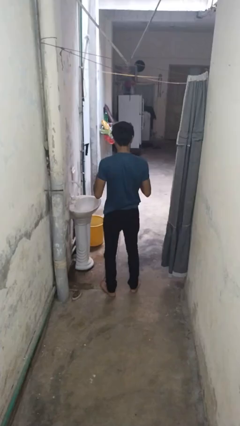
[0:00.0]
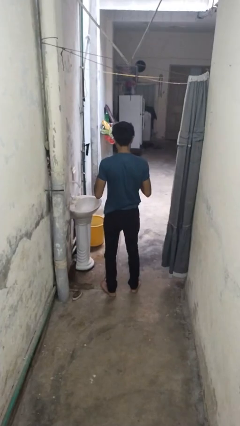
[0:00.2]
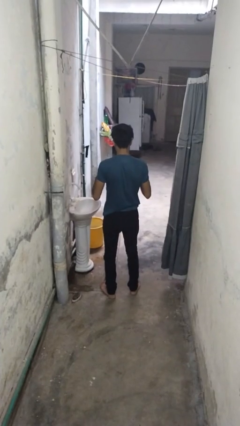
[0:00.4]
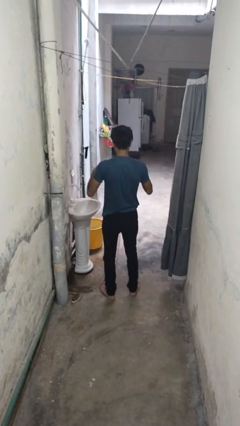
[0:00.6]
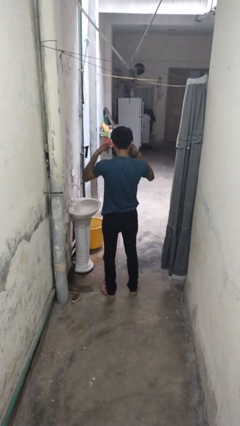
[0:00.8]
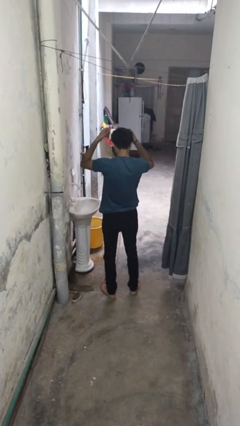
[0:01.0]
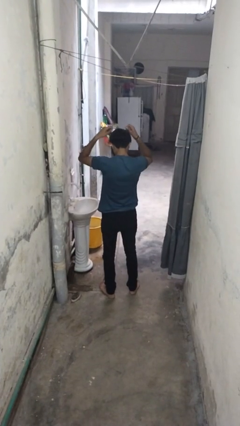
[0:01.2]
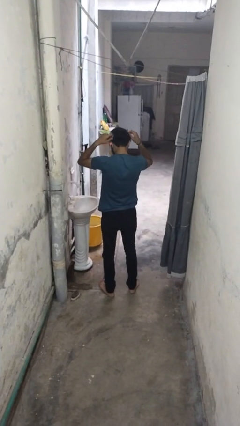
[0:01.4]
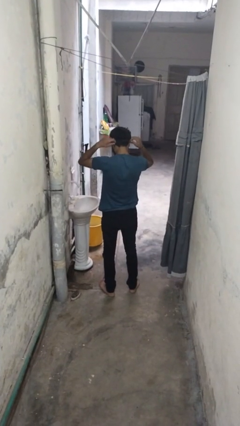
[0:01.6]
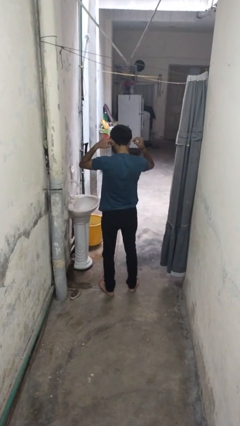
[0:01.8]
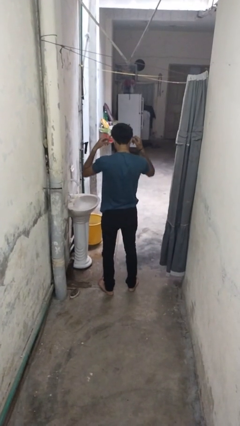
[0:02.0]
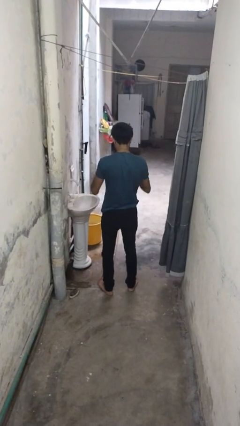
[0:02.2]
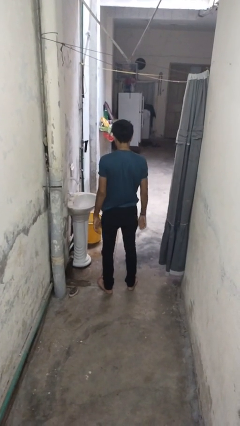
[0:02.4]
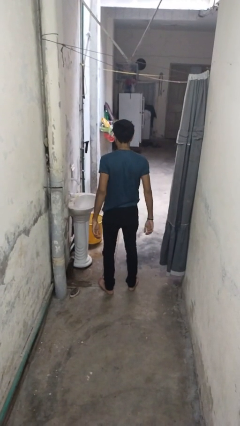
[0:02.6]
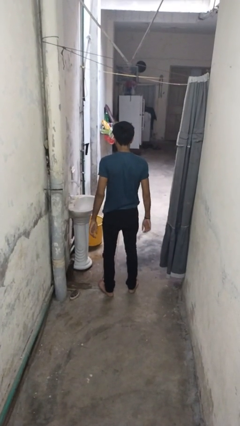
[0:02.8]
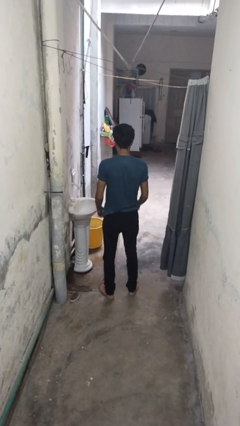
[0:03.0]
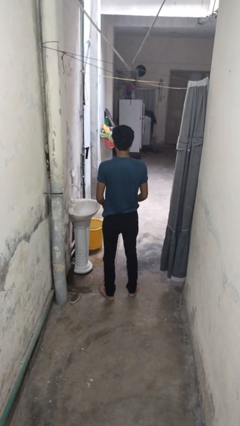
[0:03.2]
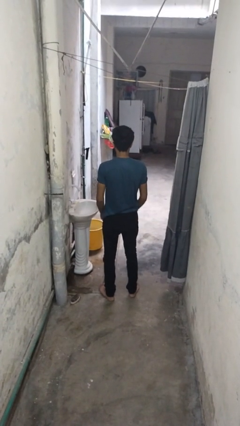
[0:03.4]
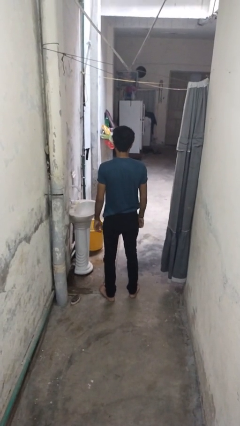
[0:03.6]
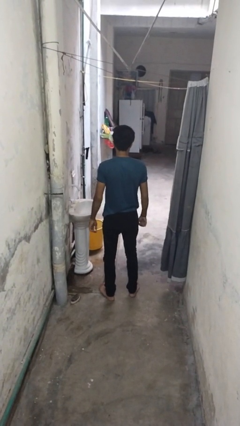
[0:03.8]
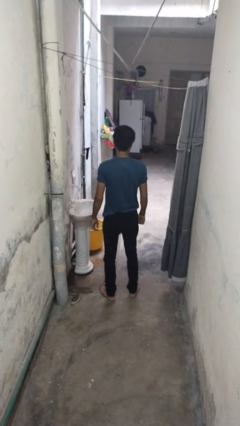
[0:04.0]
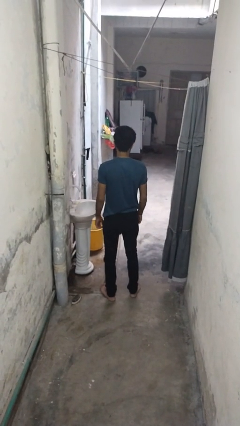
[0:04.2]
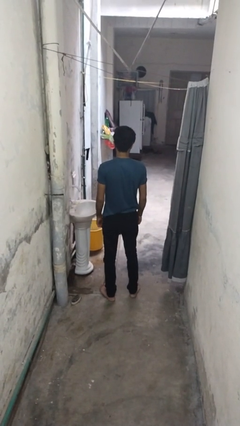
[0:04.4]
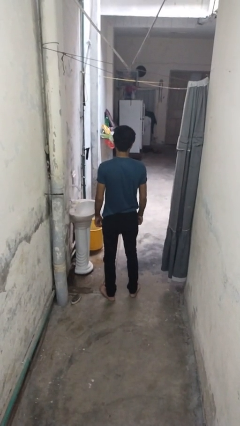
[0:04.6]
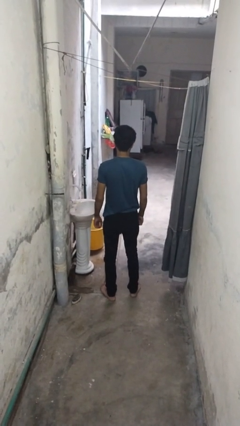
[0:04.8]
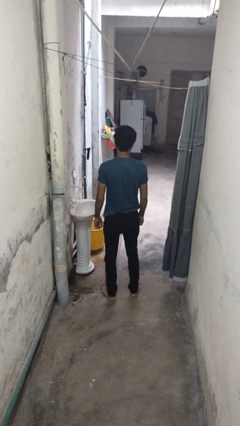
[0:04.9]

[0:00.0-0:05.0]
person puts on necklace

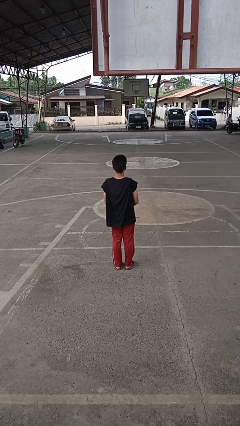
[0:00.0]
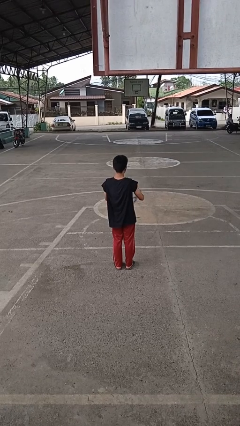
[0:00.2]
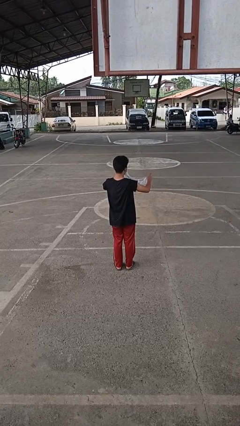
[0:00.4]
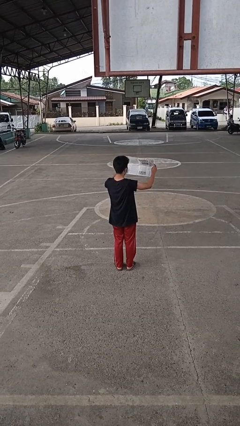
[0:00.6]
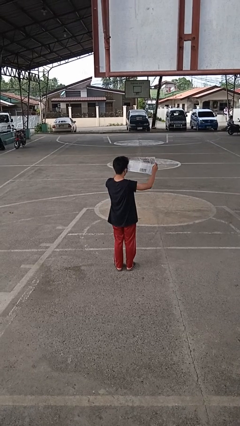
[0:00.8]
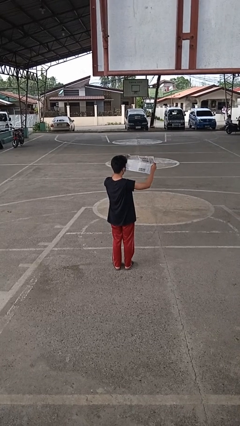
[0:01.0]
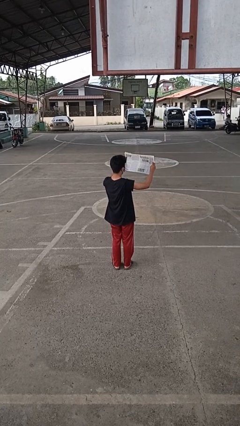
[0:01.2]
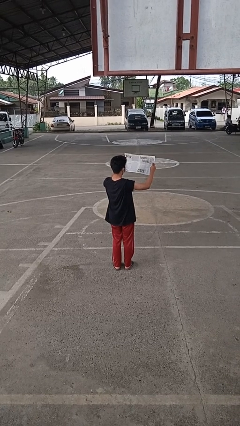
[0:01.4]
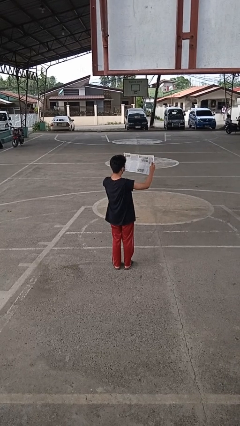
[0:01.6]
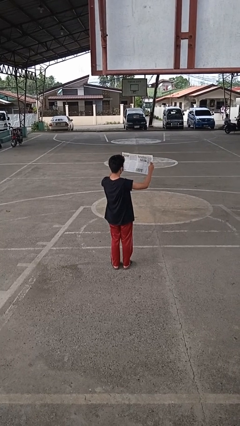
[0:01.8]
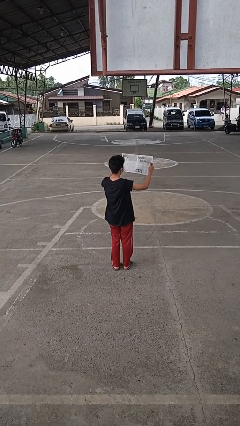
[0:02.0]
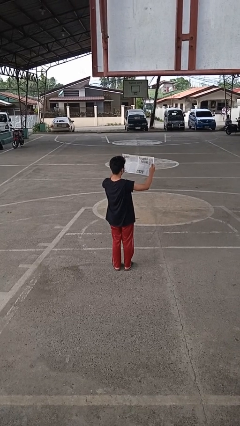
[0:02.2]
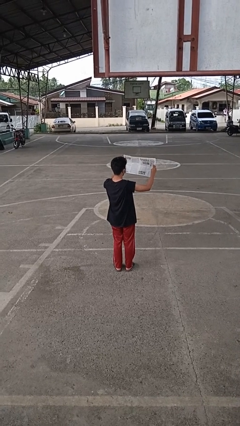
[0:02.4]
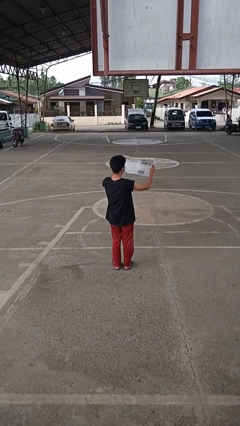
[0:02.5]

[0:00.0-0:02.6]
person reads newspaper

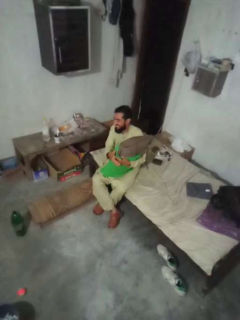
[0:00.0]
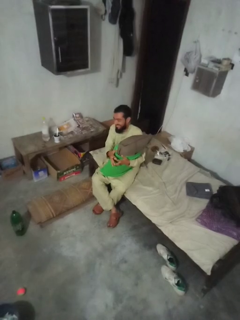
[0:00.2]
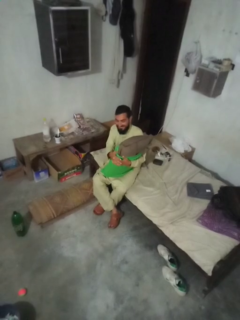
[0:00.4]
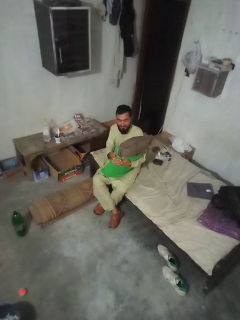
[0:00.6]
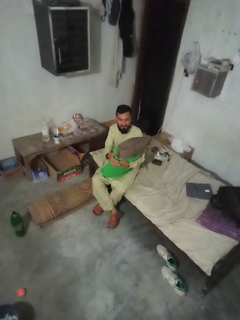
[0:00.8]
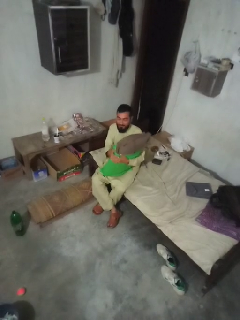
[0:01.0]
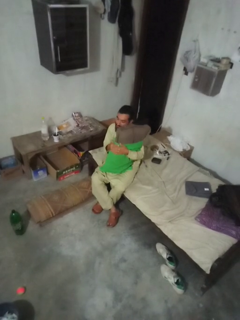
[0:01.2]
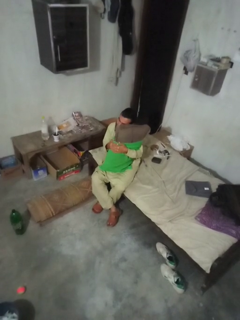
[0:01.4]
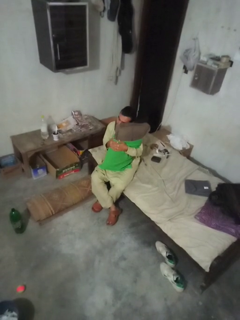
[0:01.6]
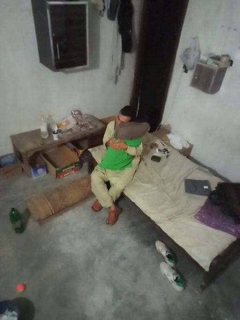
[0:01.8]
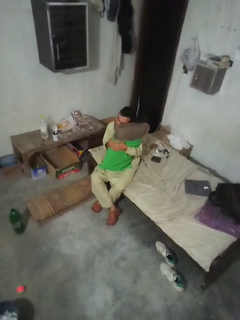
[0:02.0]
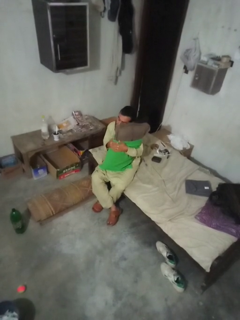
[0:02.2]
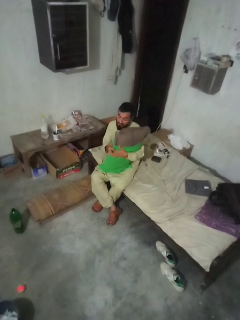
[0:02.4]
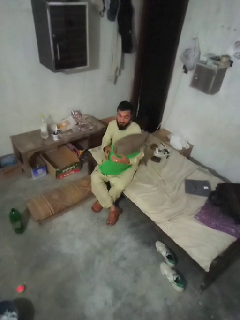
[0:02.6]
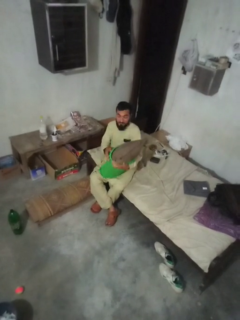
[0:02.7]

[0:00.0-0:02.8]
person hugs stuffed animal

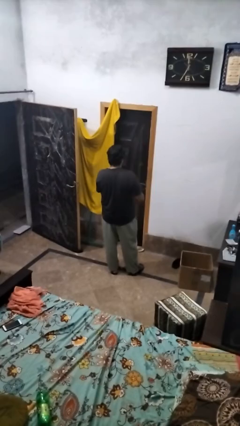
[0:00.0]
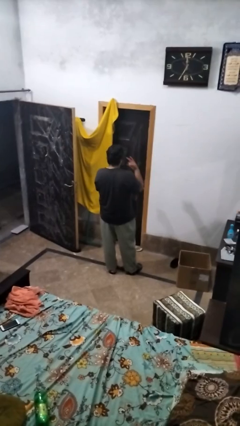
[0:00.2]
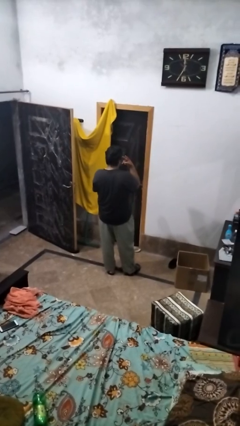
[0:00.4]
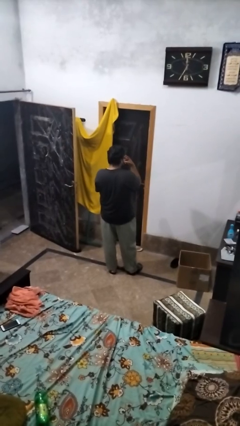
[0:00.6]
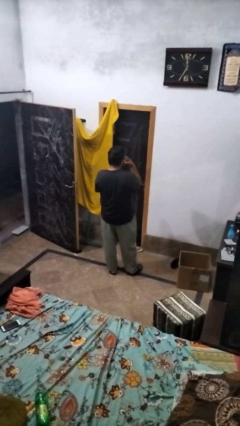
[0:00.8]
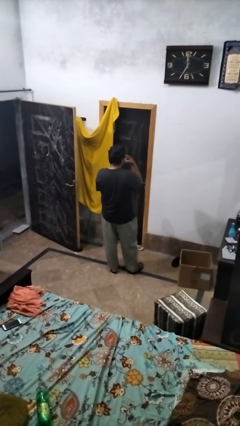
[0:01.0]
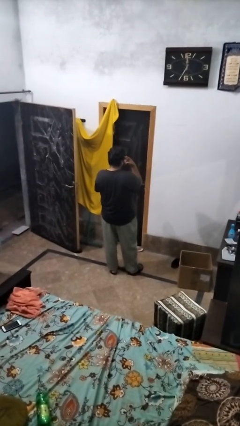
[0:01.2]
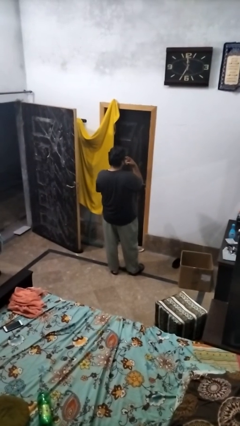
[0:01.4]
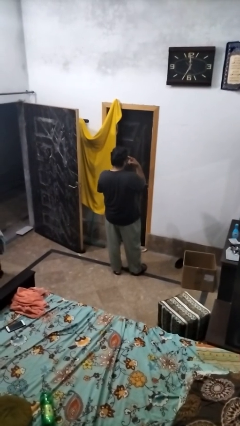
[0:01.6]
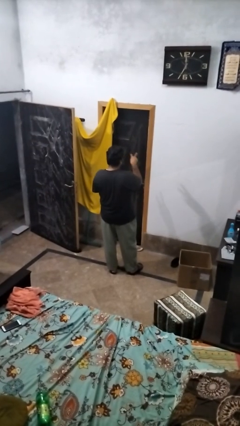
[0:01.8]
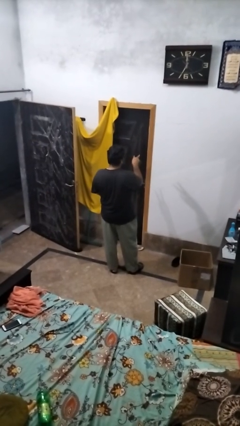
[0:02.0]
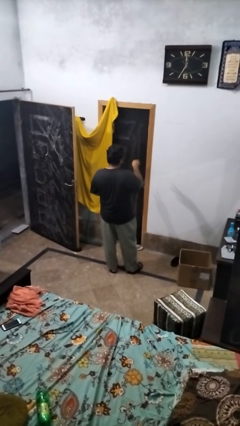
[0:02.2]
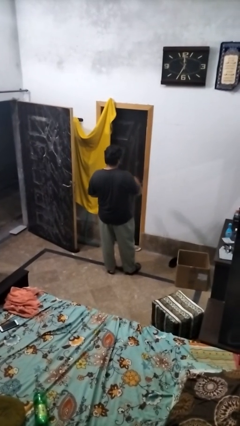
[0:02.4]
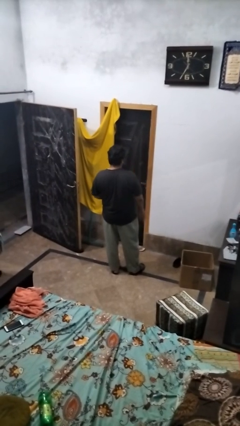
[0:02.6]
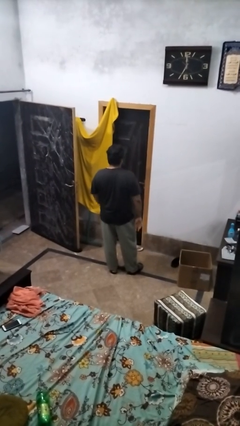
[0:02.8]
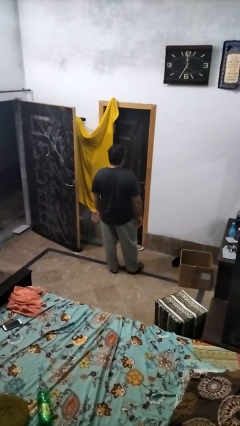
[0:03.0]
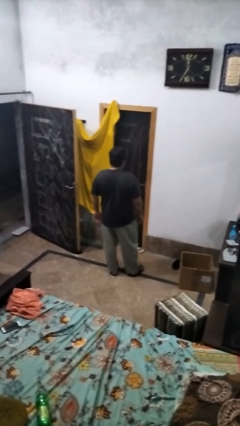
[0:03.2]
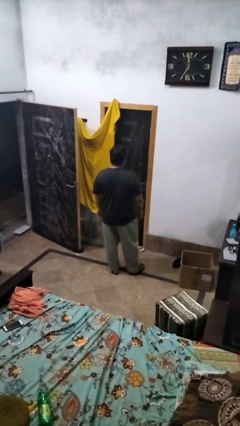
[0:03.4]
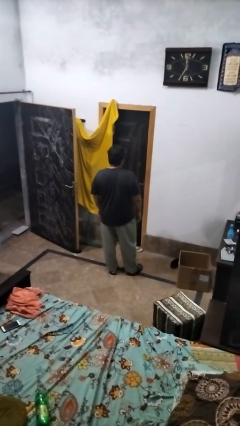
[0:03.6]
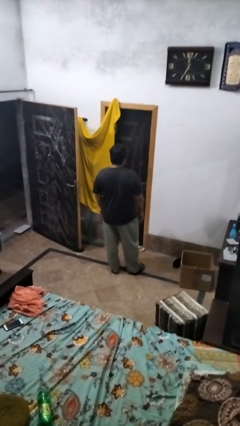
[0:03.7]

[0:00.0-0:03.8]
person gestures watch closely

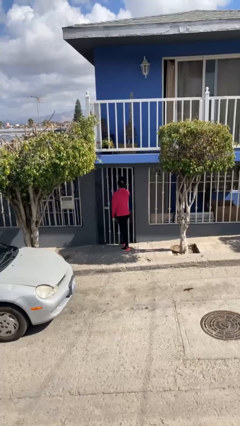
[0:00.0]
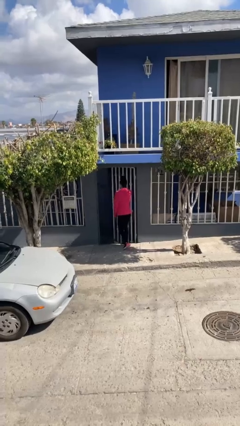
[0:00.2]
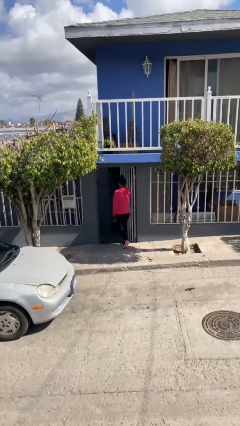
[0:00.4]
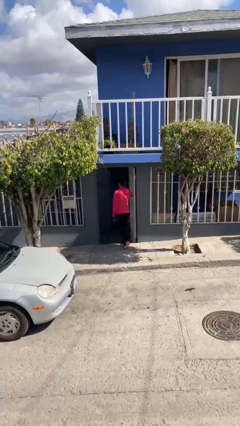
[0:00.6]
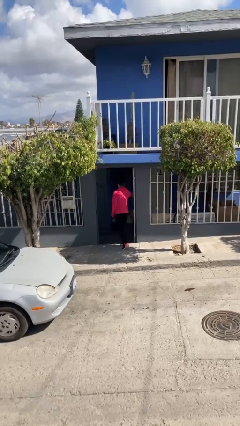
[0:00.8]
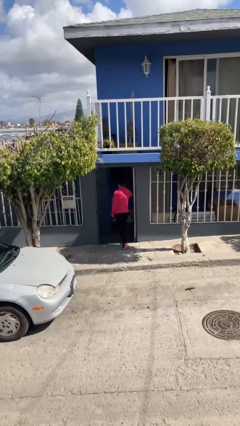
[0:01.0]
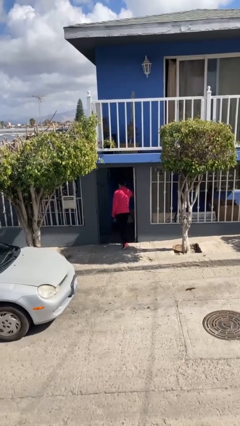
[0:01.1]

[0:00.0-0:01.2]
person opens facility door

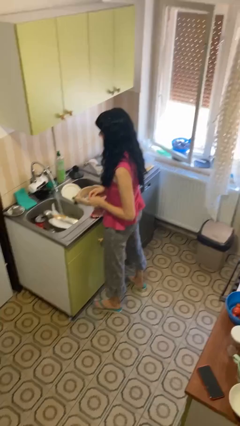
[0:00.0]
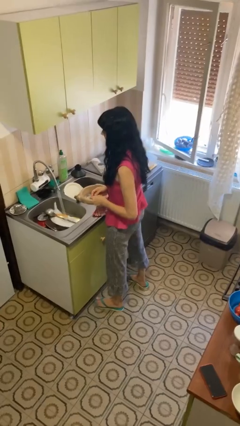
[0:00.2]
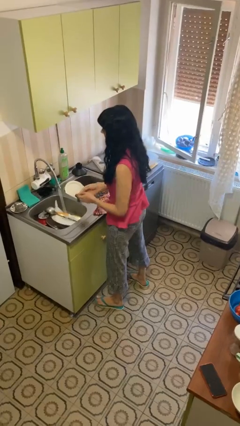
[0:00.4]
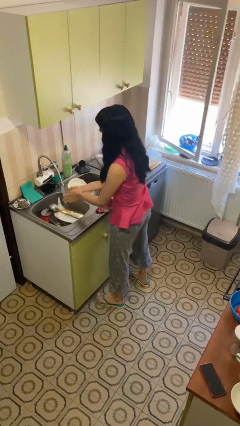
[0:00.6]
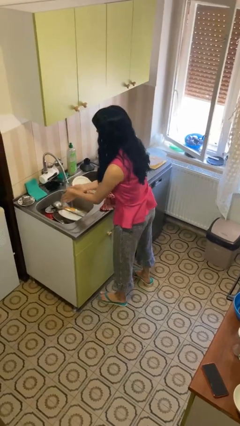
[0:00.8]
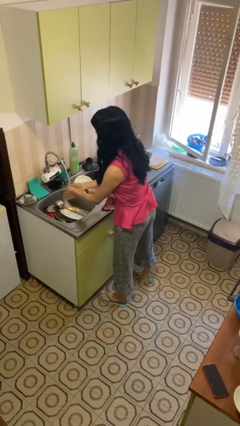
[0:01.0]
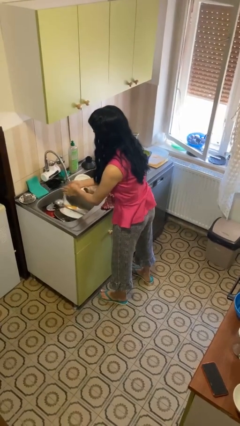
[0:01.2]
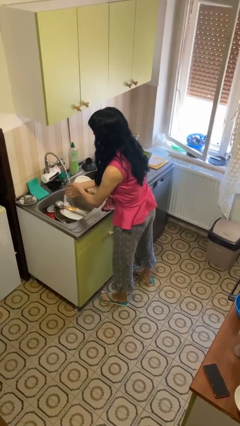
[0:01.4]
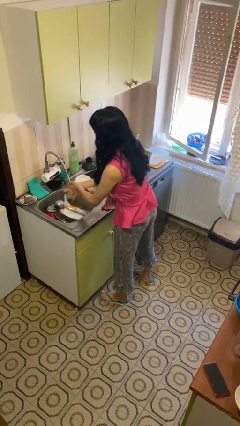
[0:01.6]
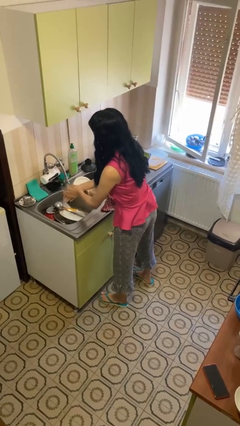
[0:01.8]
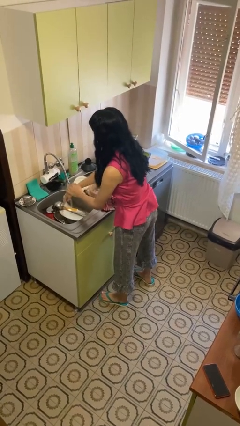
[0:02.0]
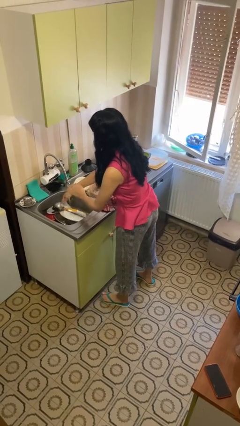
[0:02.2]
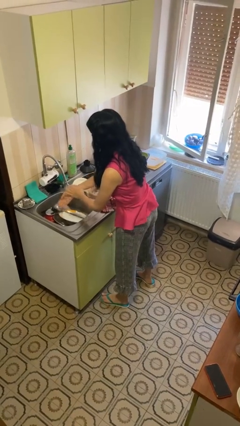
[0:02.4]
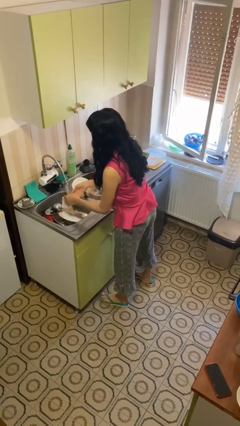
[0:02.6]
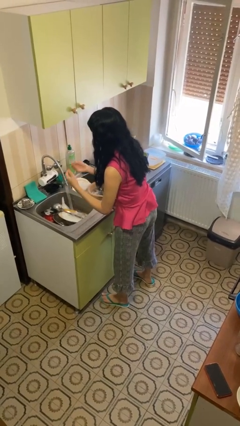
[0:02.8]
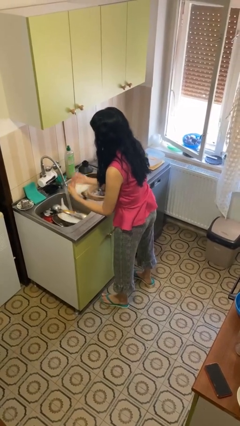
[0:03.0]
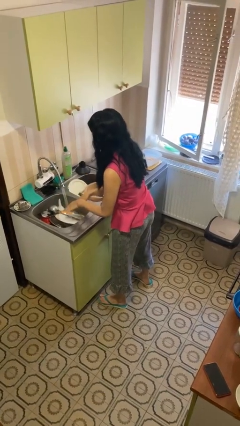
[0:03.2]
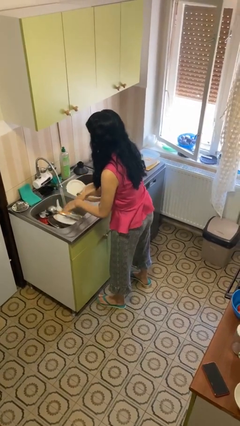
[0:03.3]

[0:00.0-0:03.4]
person washes hands
